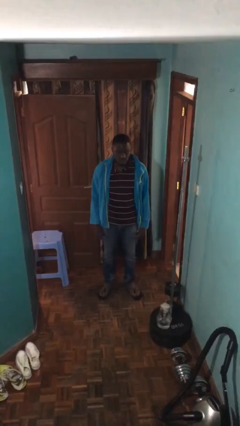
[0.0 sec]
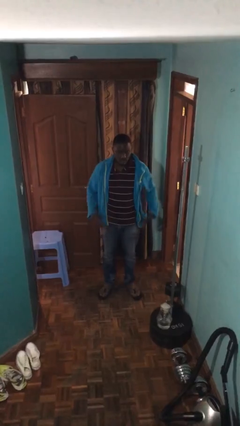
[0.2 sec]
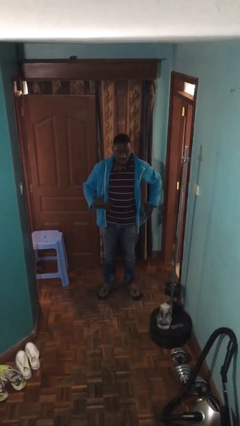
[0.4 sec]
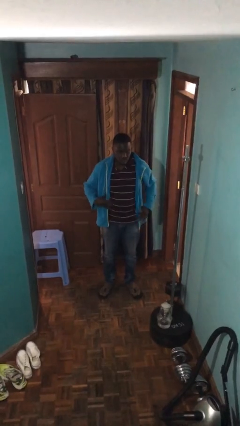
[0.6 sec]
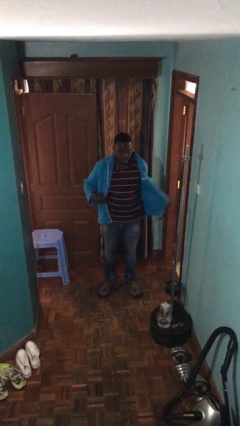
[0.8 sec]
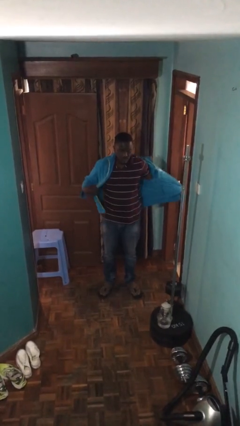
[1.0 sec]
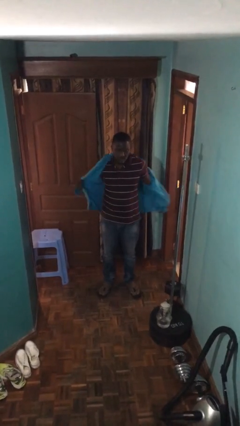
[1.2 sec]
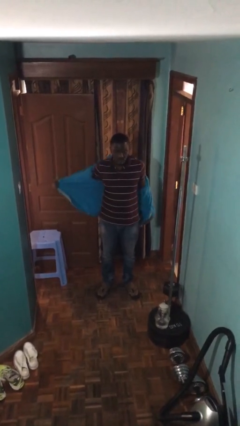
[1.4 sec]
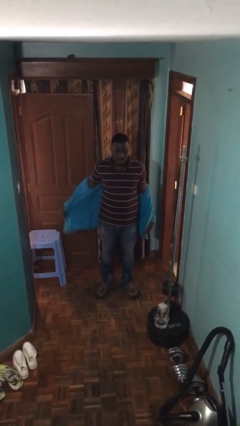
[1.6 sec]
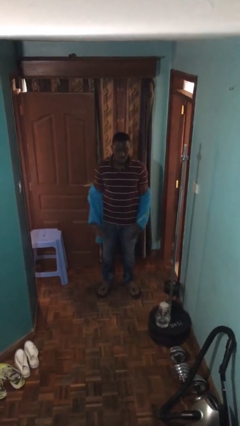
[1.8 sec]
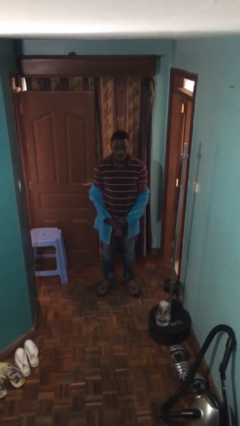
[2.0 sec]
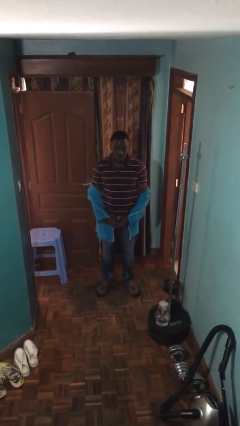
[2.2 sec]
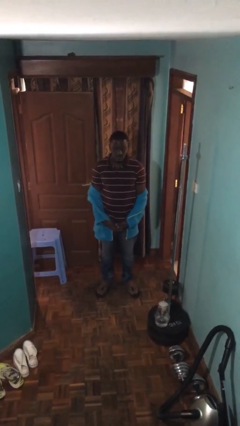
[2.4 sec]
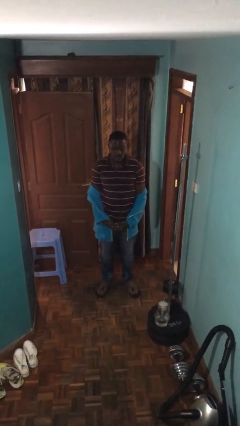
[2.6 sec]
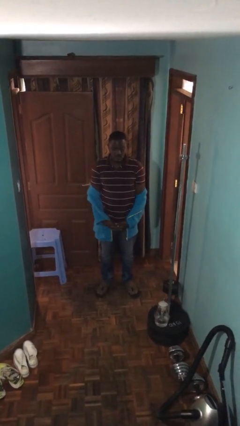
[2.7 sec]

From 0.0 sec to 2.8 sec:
person takes off jacket

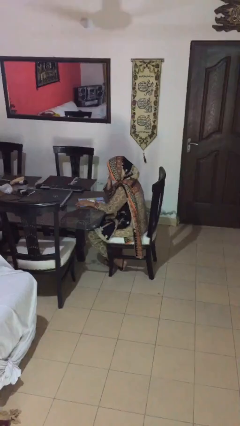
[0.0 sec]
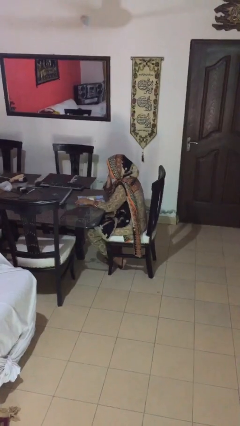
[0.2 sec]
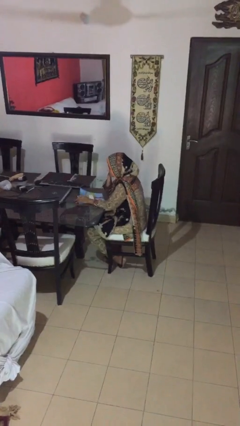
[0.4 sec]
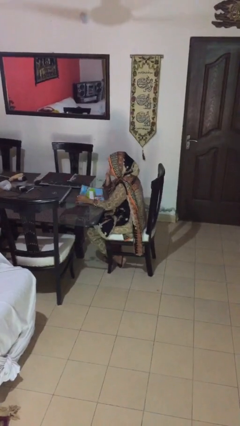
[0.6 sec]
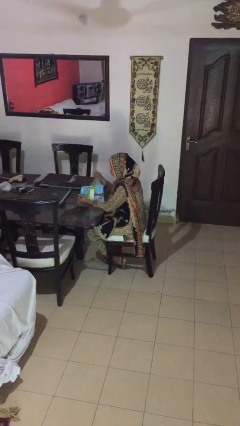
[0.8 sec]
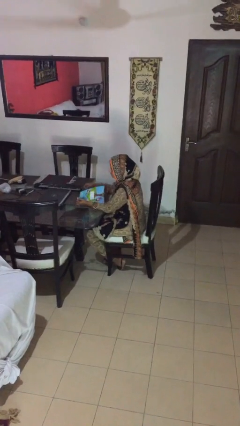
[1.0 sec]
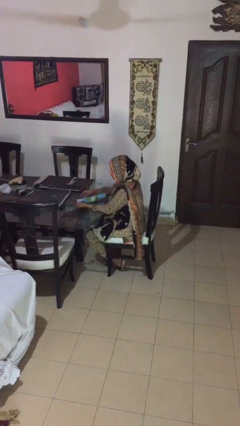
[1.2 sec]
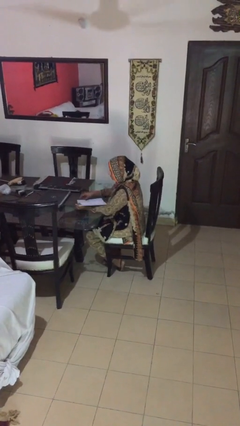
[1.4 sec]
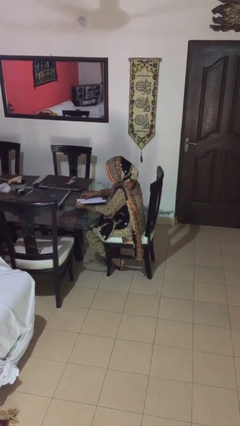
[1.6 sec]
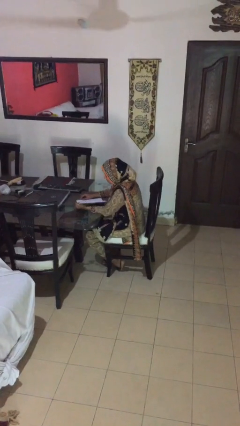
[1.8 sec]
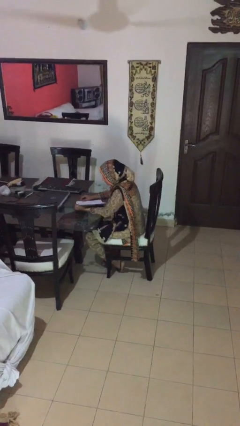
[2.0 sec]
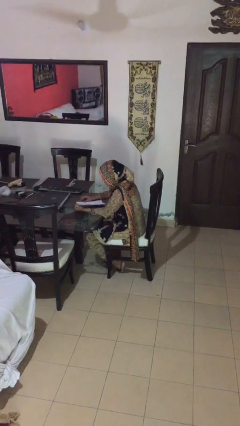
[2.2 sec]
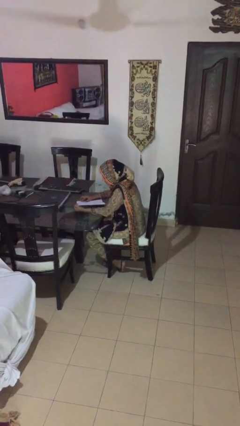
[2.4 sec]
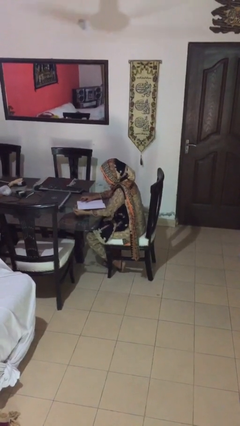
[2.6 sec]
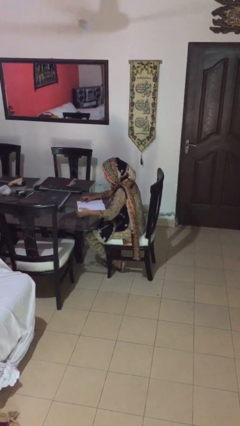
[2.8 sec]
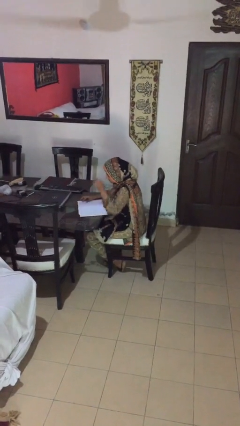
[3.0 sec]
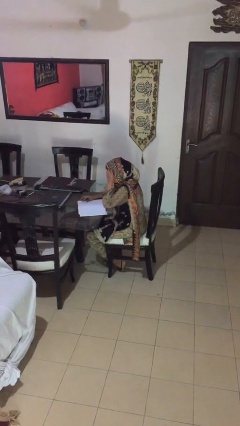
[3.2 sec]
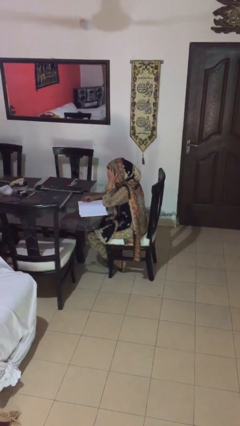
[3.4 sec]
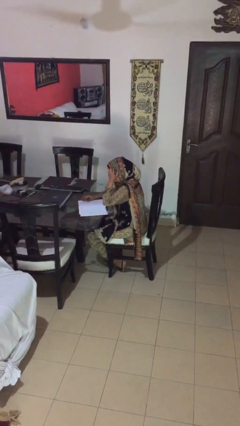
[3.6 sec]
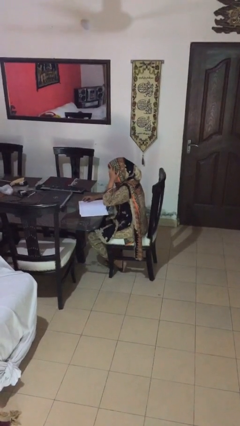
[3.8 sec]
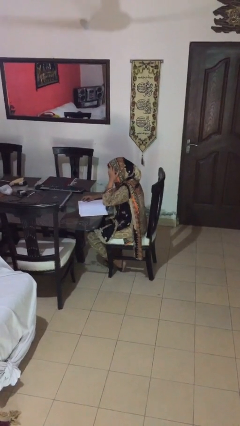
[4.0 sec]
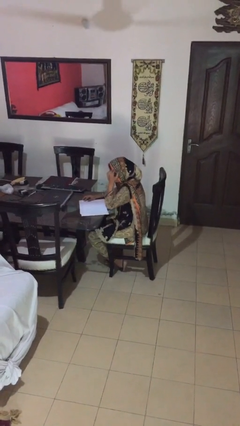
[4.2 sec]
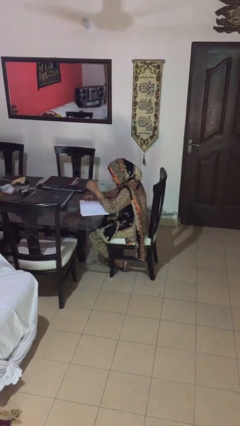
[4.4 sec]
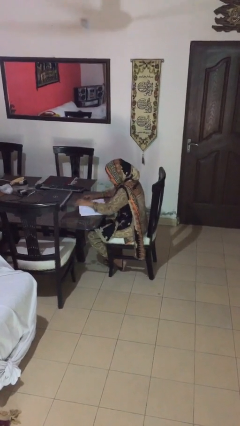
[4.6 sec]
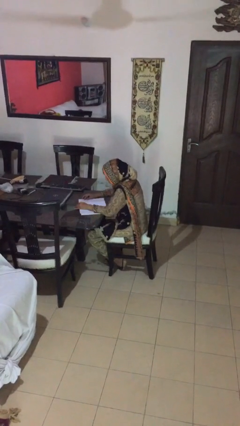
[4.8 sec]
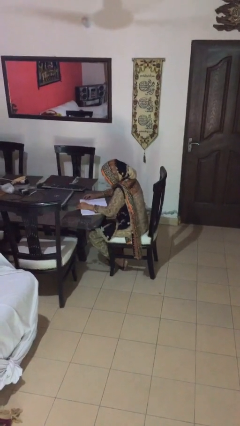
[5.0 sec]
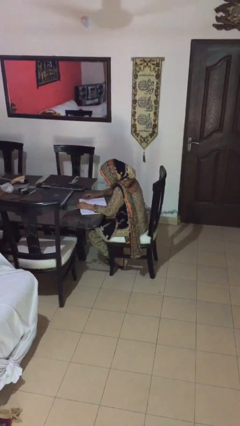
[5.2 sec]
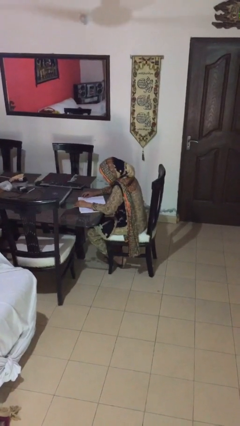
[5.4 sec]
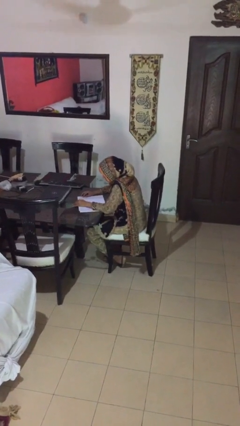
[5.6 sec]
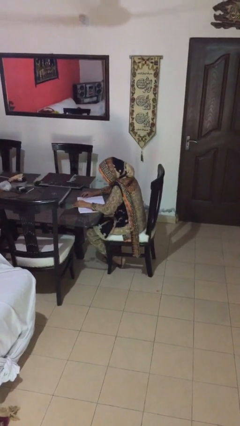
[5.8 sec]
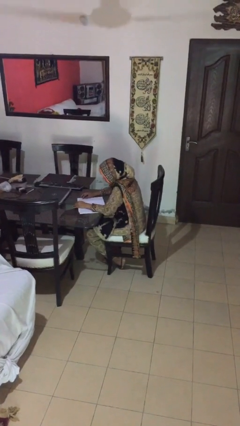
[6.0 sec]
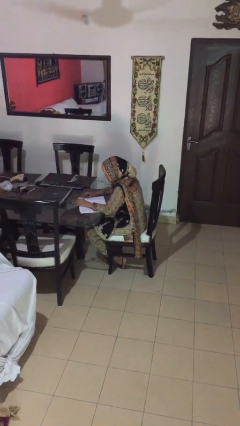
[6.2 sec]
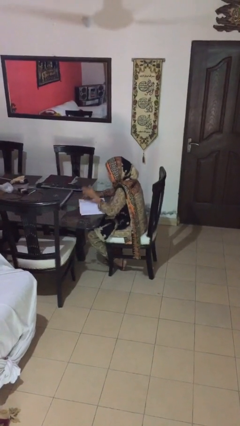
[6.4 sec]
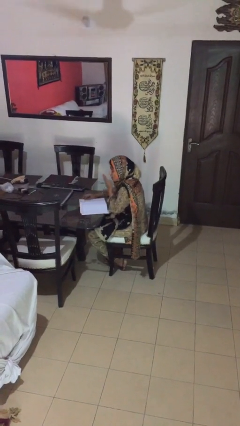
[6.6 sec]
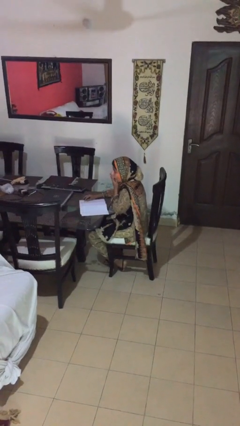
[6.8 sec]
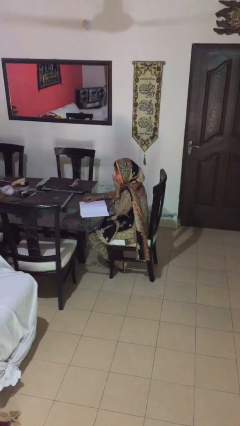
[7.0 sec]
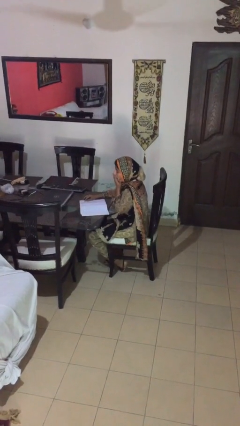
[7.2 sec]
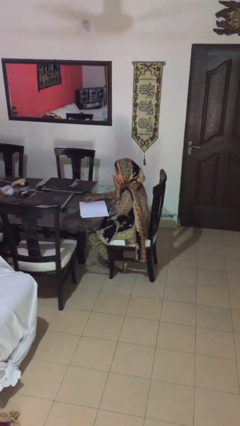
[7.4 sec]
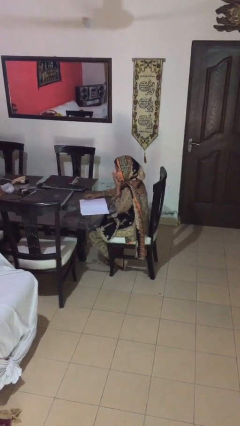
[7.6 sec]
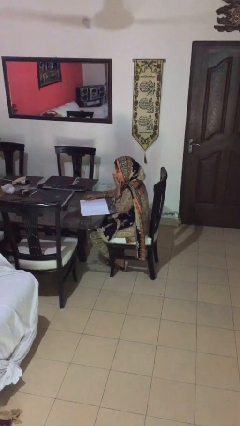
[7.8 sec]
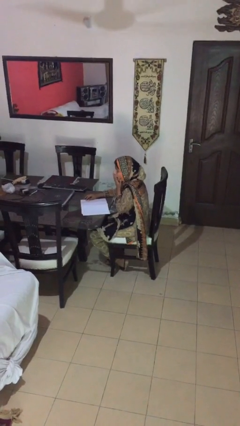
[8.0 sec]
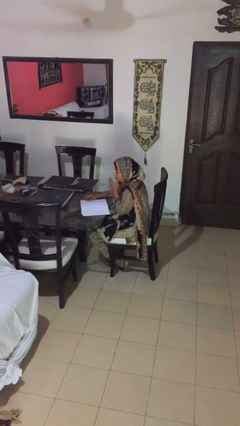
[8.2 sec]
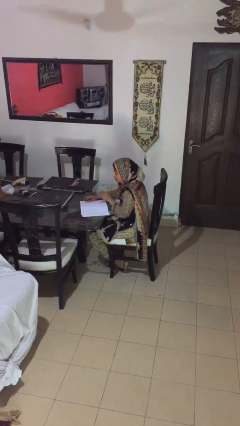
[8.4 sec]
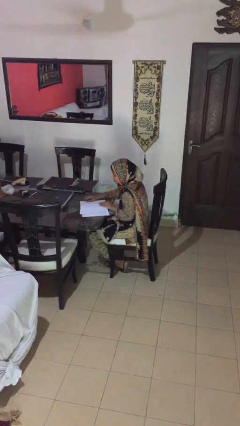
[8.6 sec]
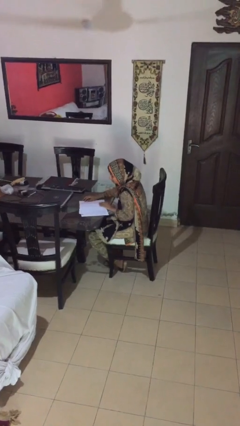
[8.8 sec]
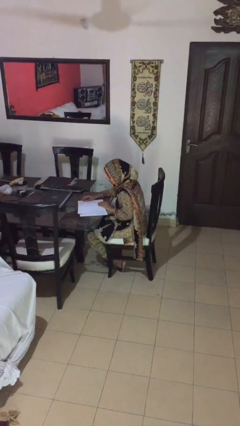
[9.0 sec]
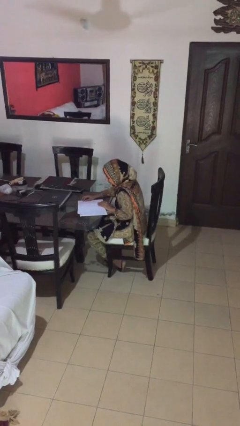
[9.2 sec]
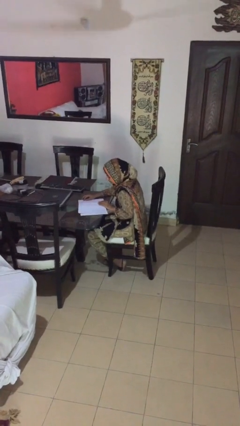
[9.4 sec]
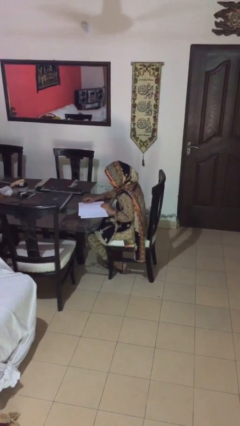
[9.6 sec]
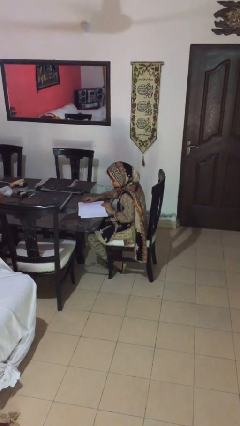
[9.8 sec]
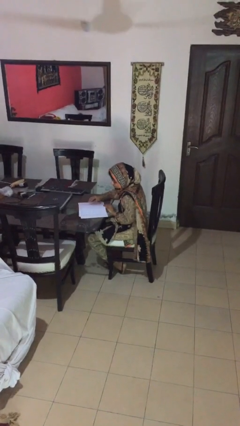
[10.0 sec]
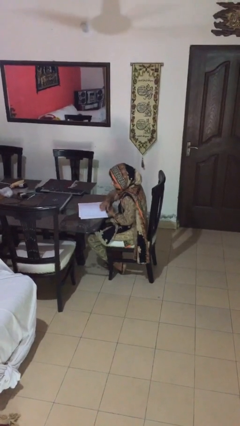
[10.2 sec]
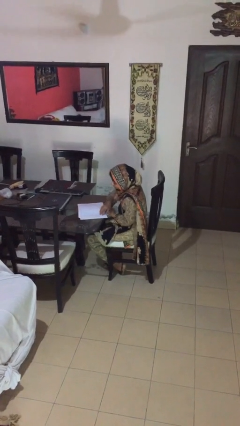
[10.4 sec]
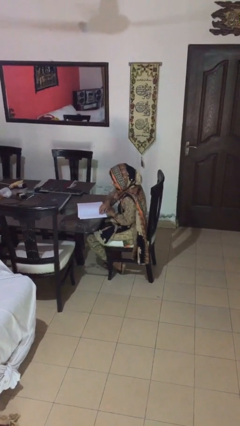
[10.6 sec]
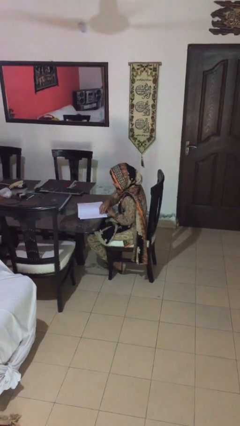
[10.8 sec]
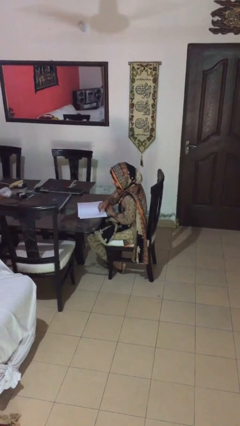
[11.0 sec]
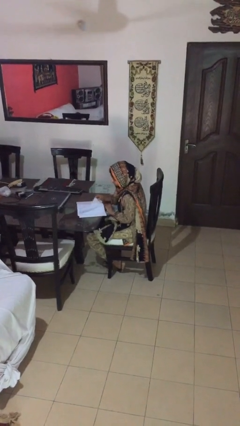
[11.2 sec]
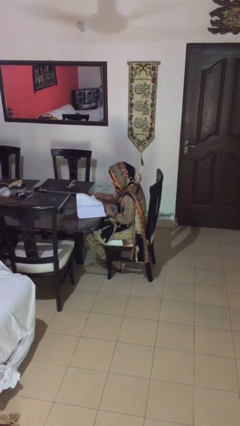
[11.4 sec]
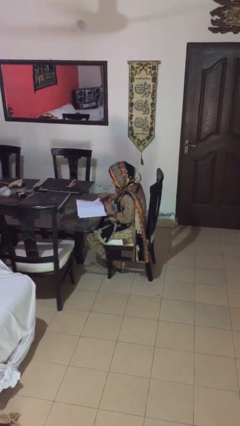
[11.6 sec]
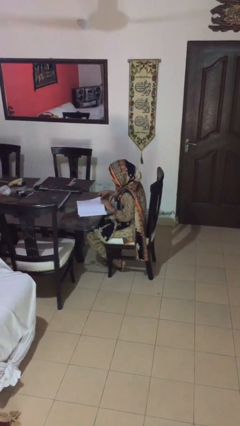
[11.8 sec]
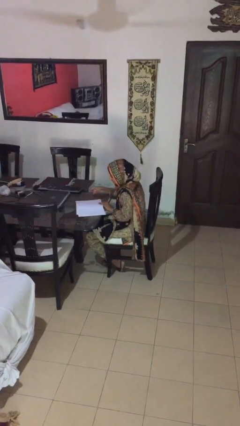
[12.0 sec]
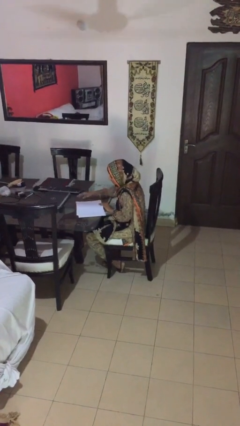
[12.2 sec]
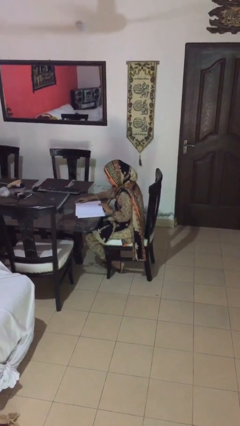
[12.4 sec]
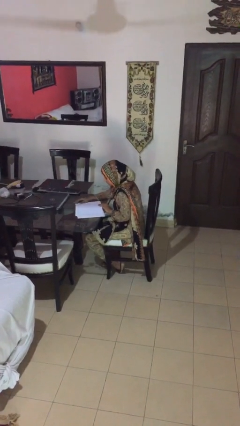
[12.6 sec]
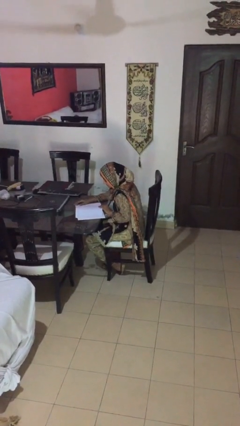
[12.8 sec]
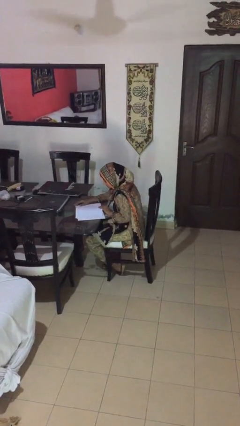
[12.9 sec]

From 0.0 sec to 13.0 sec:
person reads document

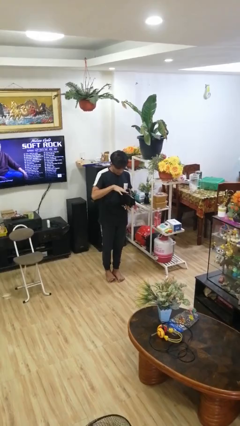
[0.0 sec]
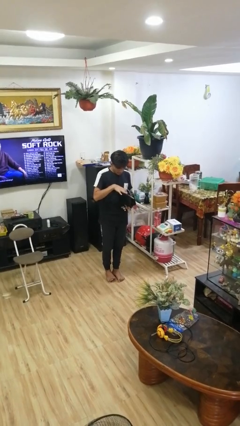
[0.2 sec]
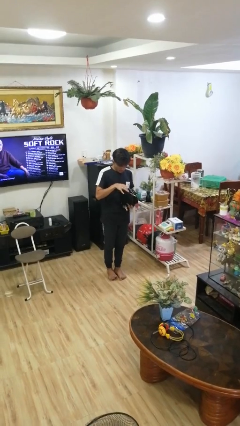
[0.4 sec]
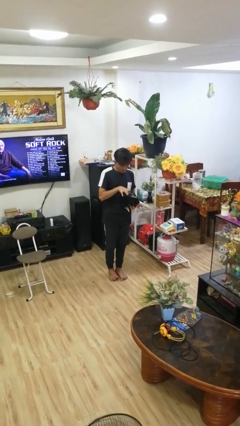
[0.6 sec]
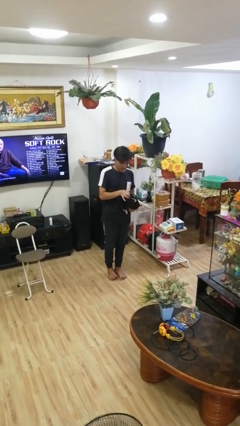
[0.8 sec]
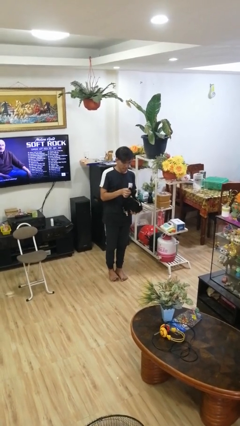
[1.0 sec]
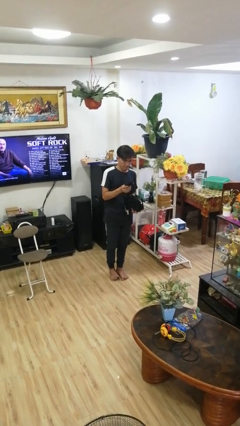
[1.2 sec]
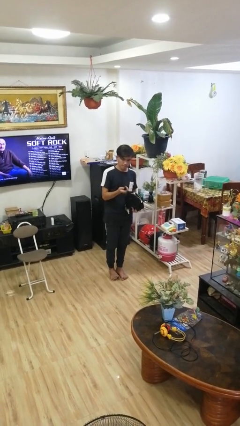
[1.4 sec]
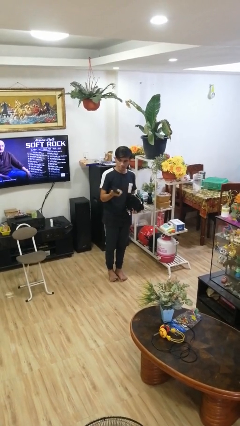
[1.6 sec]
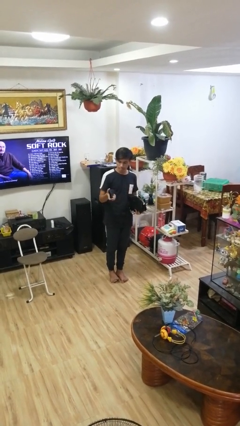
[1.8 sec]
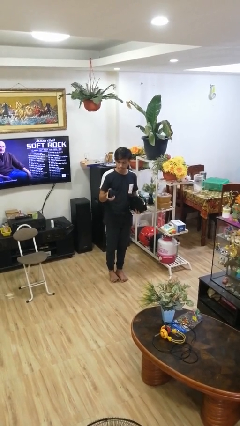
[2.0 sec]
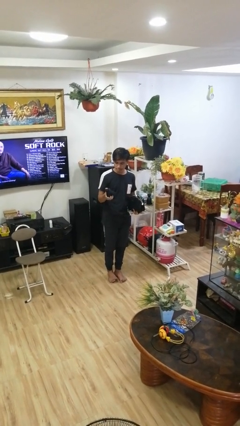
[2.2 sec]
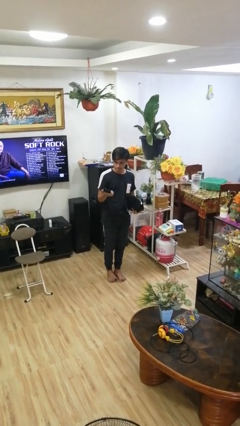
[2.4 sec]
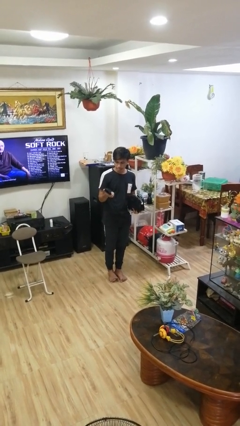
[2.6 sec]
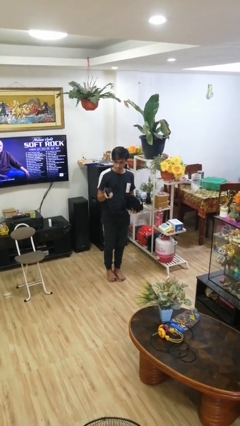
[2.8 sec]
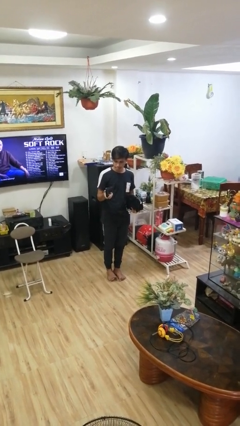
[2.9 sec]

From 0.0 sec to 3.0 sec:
person takes object from purse
